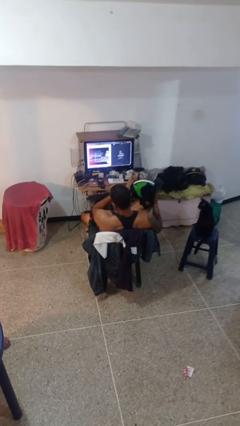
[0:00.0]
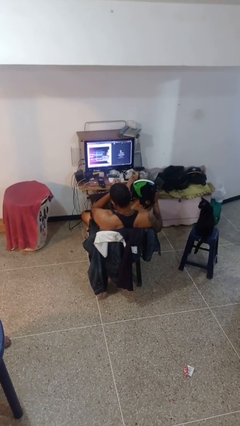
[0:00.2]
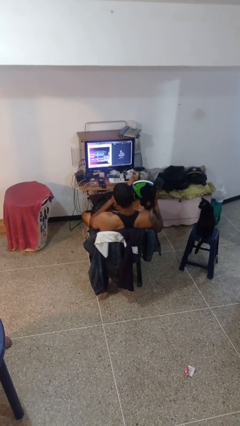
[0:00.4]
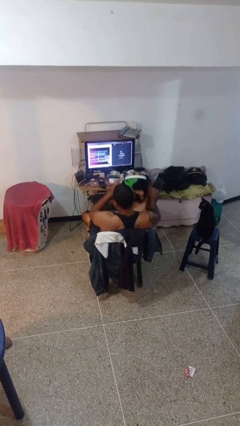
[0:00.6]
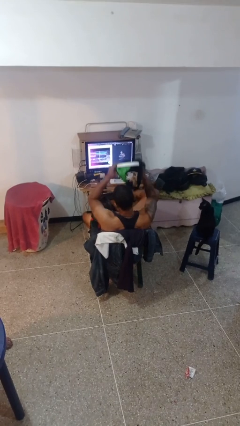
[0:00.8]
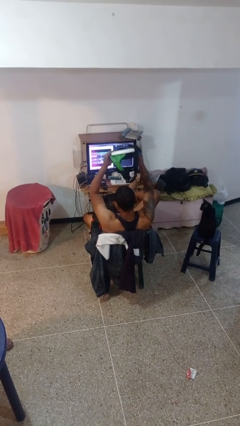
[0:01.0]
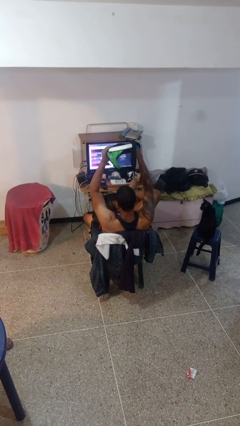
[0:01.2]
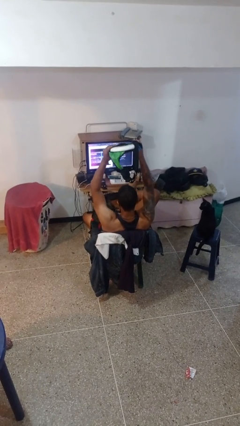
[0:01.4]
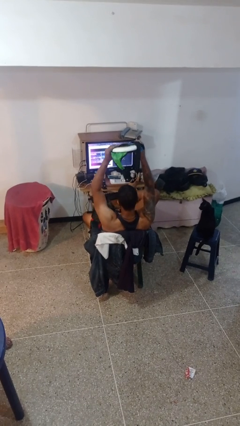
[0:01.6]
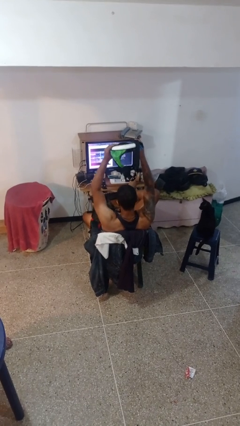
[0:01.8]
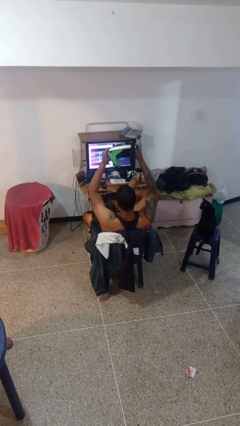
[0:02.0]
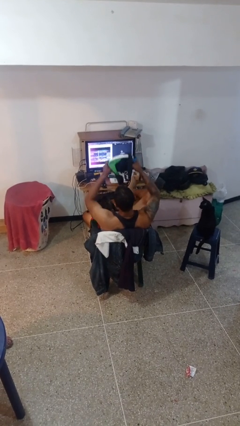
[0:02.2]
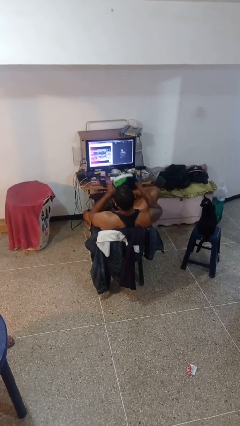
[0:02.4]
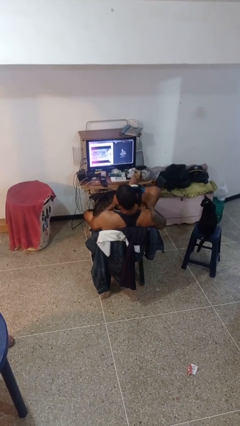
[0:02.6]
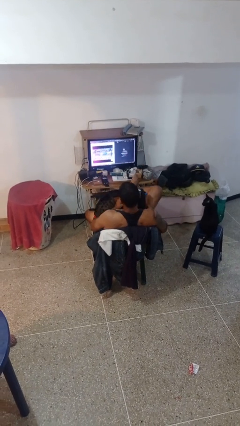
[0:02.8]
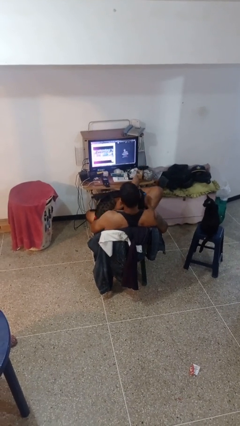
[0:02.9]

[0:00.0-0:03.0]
person holds object above head

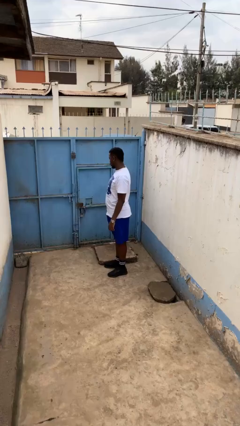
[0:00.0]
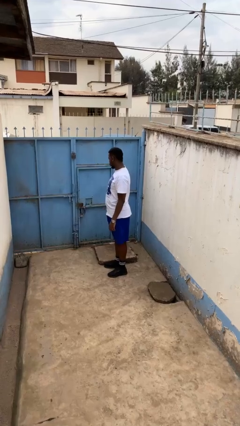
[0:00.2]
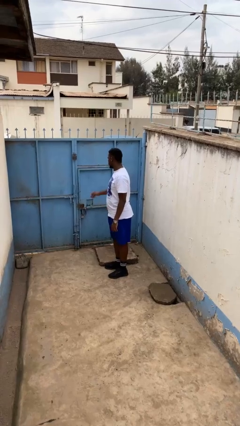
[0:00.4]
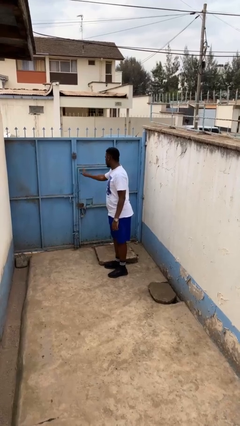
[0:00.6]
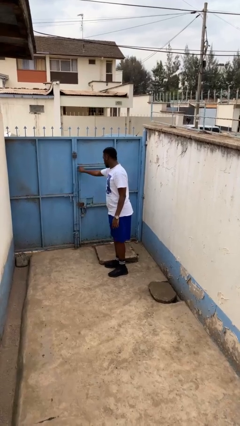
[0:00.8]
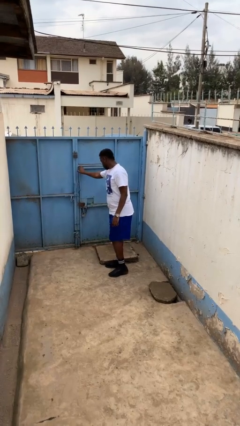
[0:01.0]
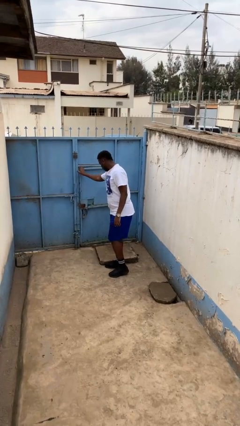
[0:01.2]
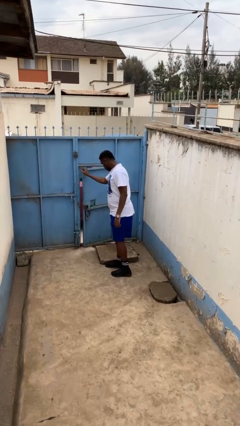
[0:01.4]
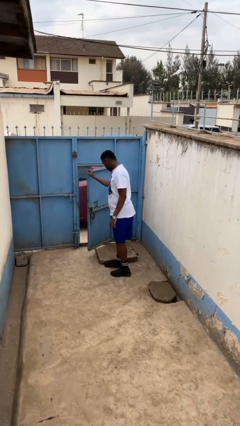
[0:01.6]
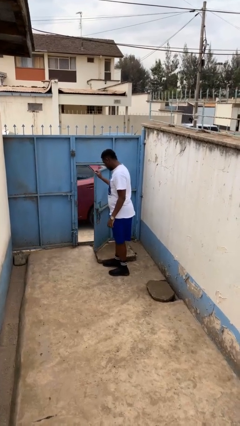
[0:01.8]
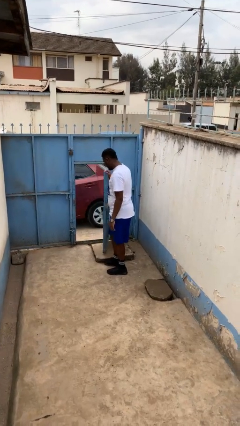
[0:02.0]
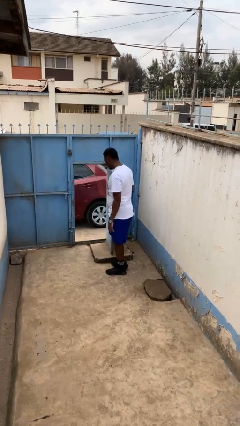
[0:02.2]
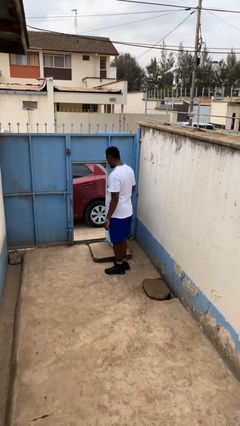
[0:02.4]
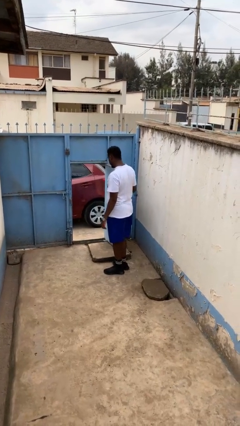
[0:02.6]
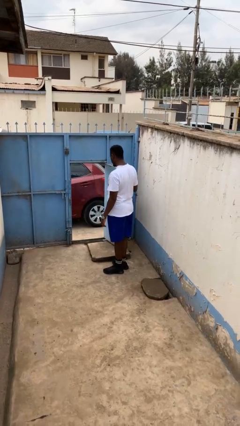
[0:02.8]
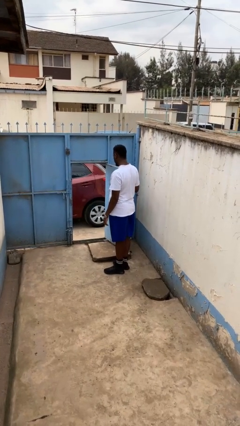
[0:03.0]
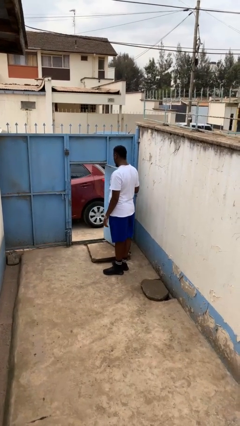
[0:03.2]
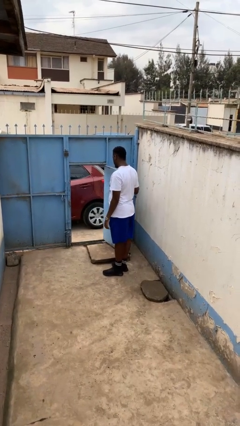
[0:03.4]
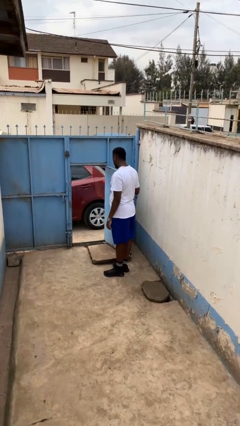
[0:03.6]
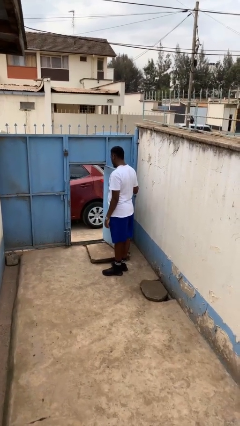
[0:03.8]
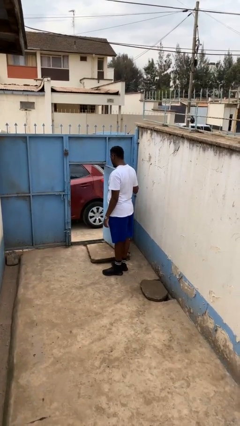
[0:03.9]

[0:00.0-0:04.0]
person opens gate

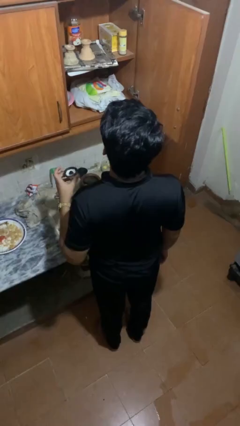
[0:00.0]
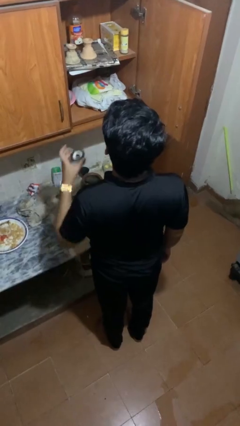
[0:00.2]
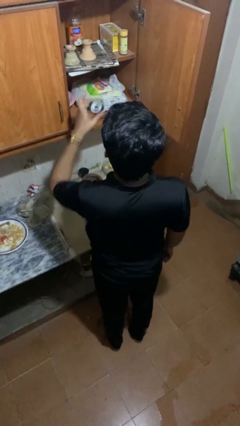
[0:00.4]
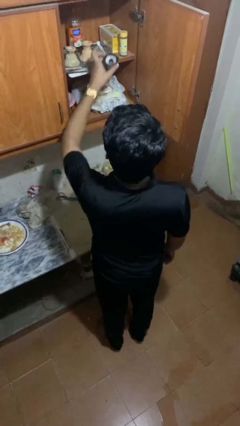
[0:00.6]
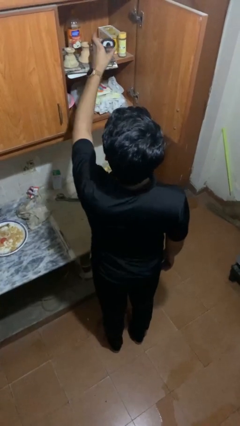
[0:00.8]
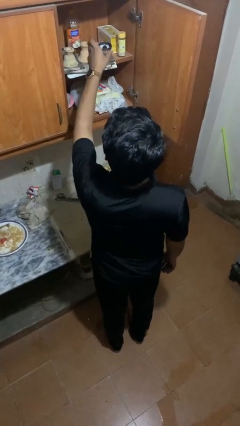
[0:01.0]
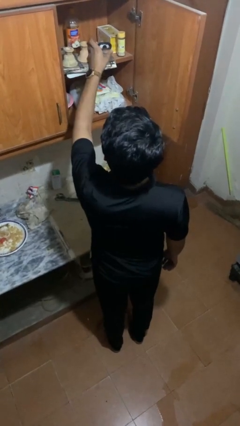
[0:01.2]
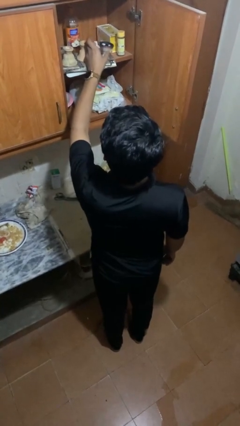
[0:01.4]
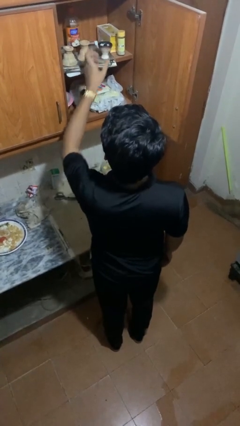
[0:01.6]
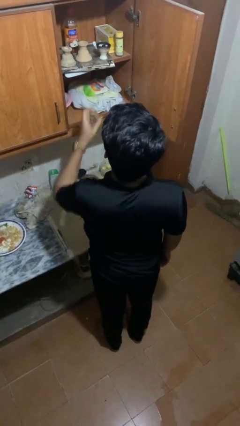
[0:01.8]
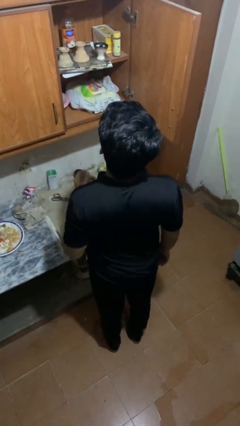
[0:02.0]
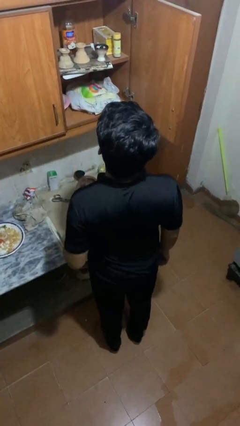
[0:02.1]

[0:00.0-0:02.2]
person puts object in cabinet

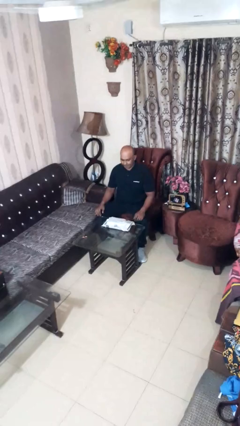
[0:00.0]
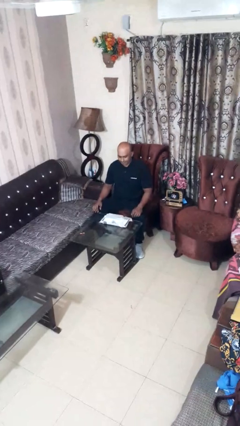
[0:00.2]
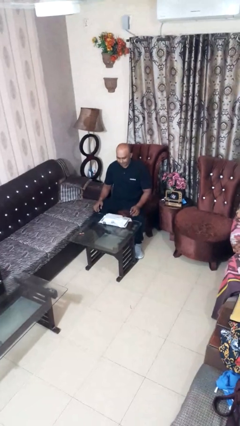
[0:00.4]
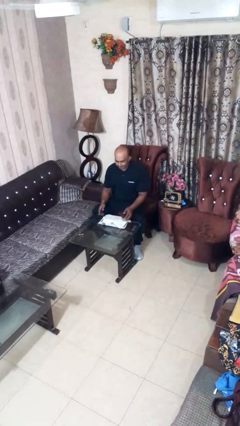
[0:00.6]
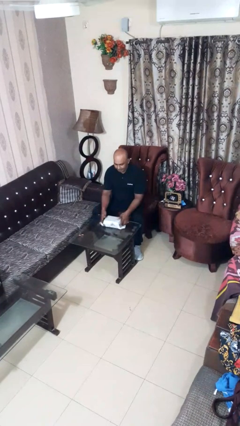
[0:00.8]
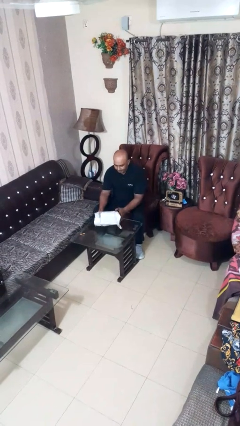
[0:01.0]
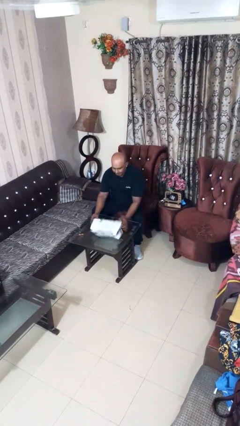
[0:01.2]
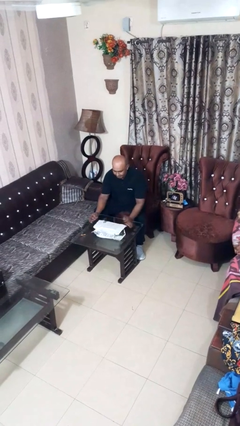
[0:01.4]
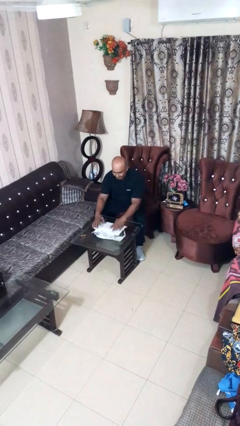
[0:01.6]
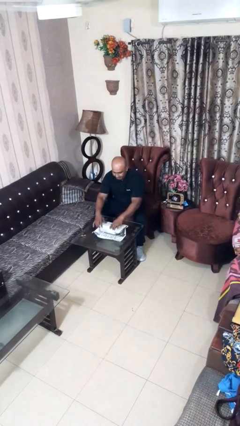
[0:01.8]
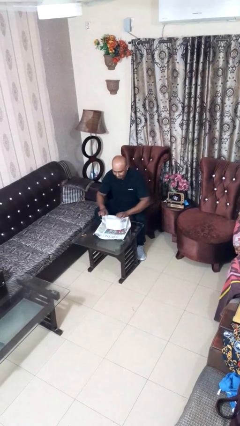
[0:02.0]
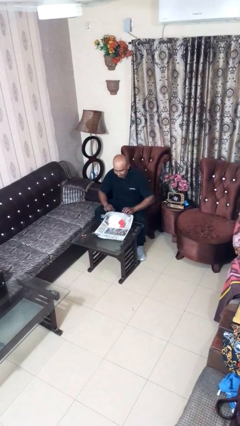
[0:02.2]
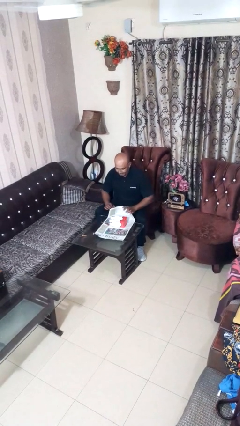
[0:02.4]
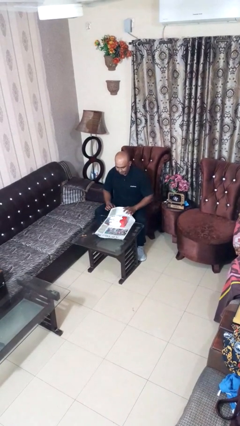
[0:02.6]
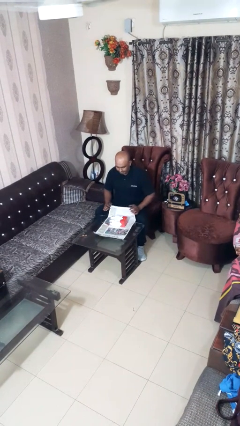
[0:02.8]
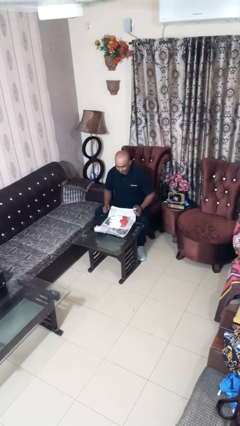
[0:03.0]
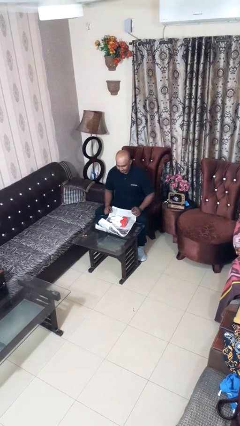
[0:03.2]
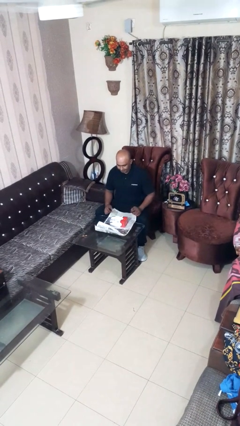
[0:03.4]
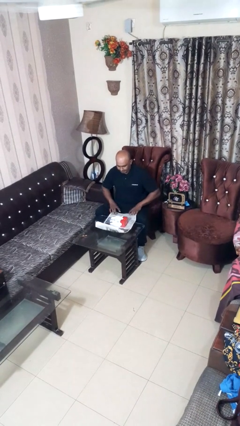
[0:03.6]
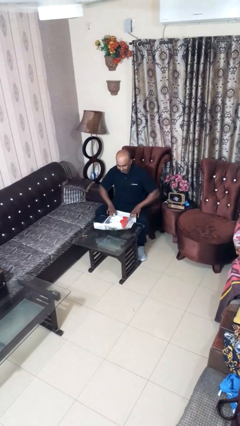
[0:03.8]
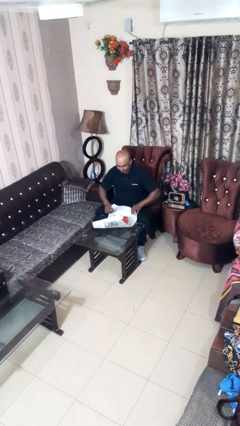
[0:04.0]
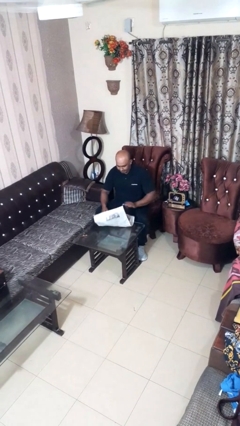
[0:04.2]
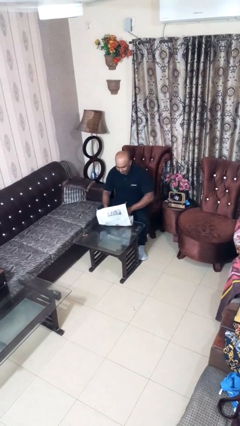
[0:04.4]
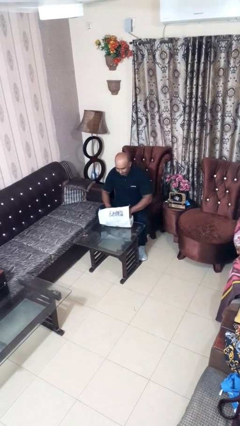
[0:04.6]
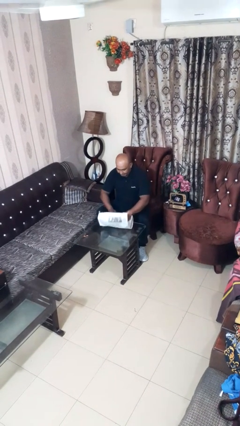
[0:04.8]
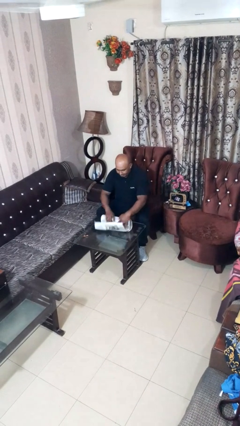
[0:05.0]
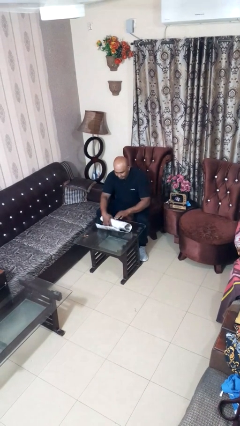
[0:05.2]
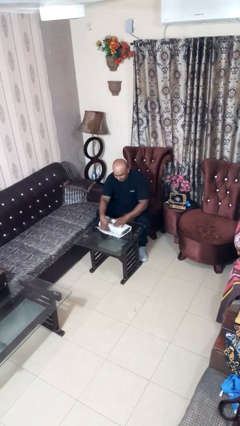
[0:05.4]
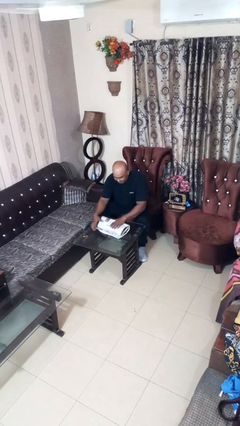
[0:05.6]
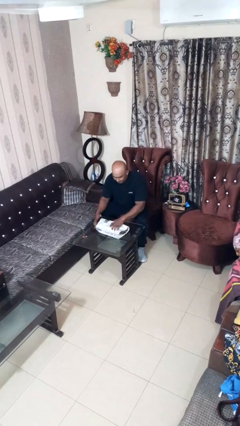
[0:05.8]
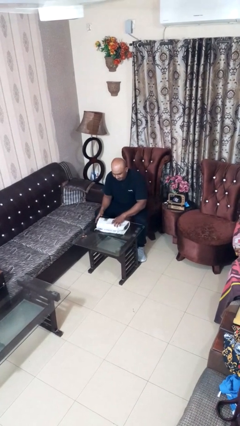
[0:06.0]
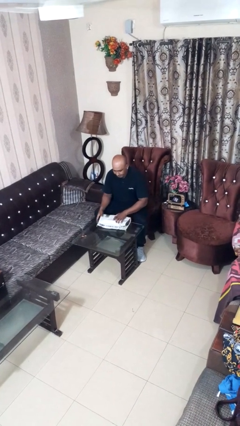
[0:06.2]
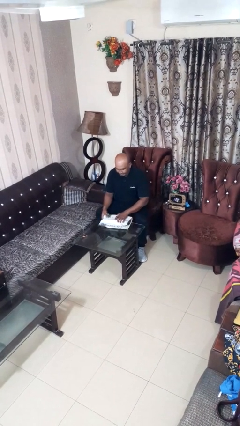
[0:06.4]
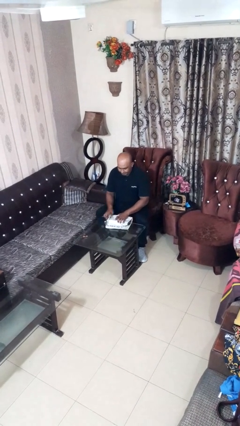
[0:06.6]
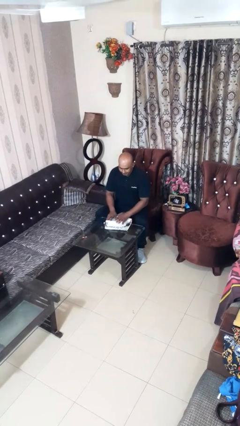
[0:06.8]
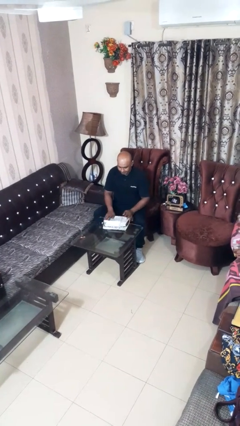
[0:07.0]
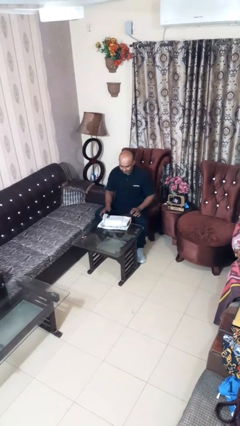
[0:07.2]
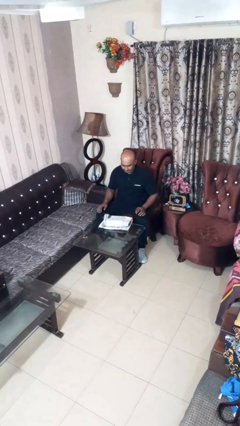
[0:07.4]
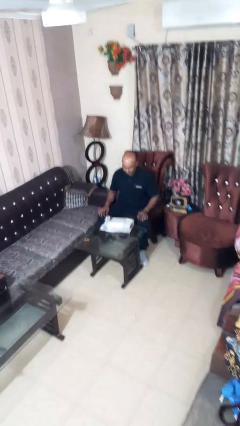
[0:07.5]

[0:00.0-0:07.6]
person wraps box

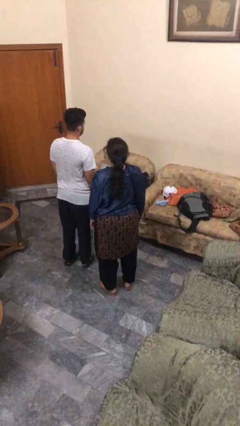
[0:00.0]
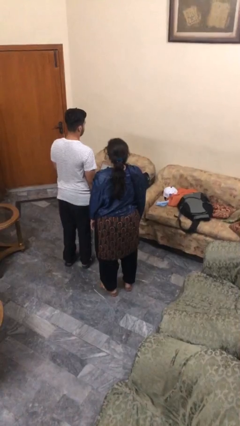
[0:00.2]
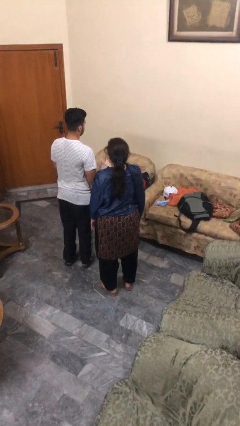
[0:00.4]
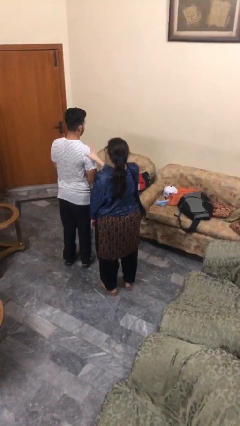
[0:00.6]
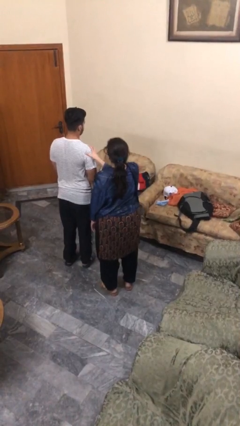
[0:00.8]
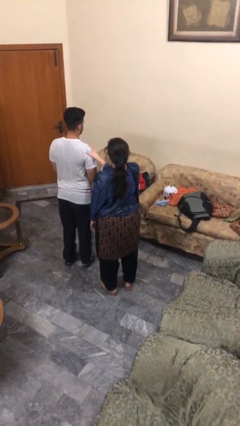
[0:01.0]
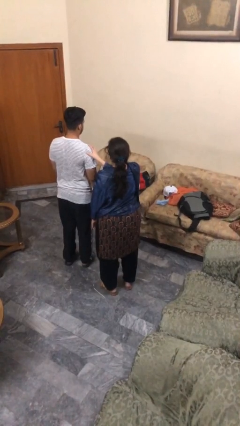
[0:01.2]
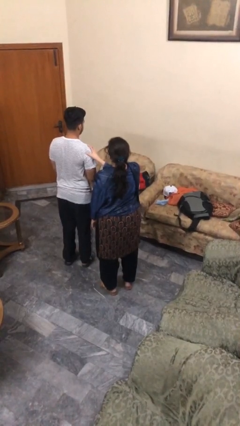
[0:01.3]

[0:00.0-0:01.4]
person grabs person by shoulder
